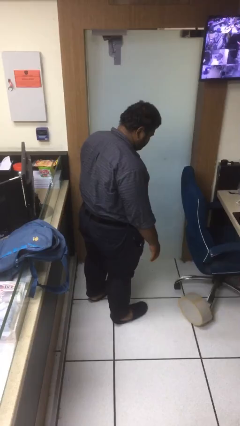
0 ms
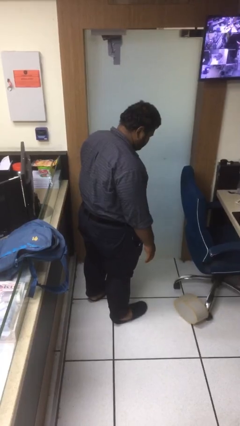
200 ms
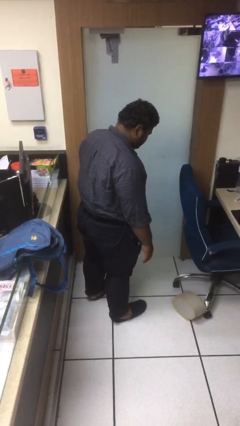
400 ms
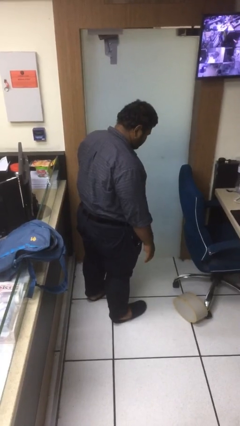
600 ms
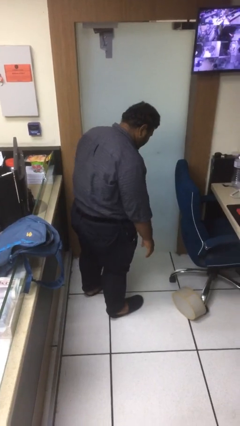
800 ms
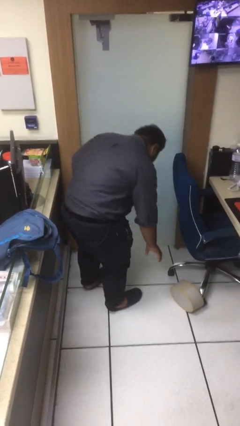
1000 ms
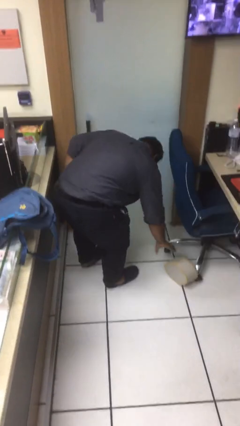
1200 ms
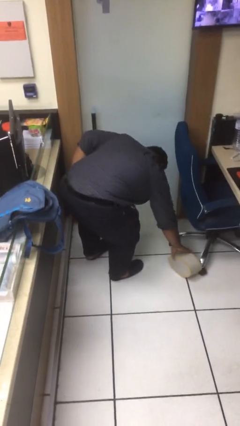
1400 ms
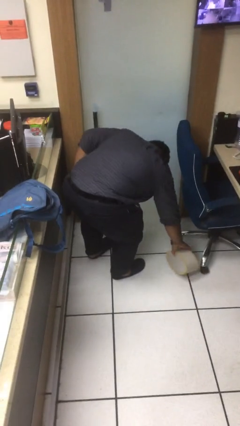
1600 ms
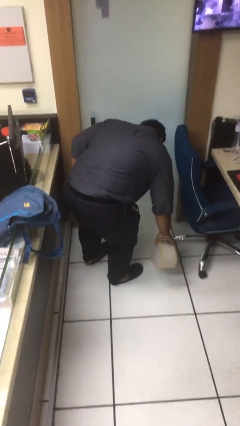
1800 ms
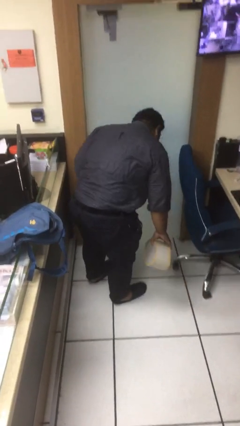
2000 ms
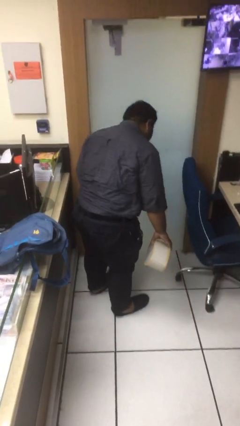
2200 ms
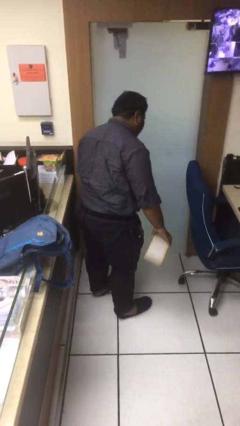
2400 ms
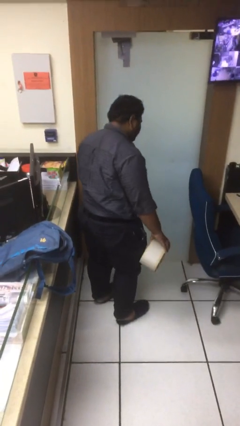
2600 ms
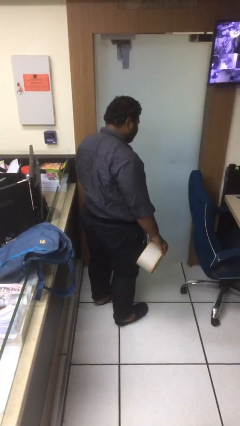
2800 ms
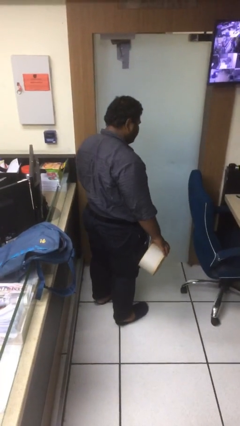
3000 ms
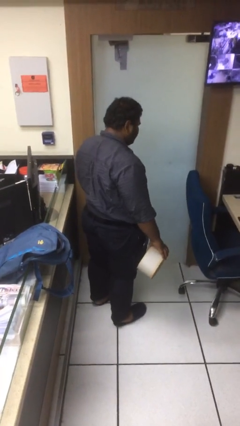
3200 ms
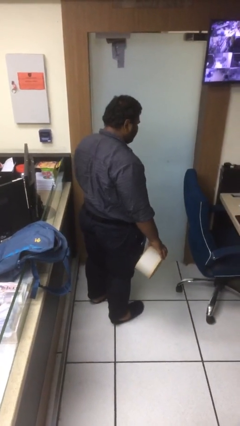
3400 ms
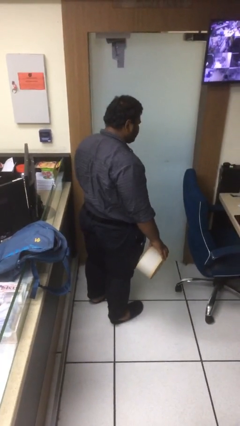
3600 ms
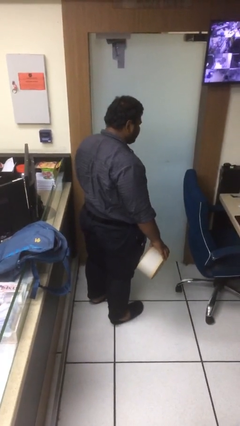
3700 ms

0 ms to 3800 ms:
person picks up object from floor

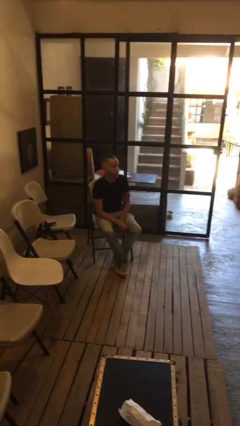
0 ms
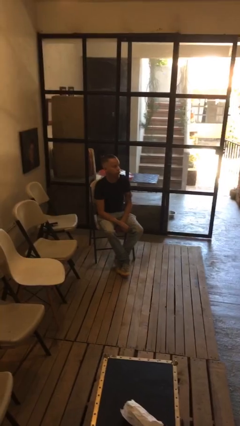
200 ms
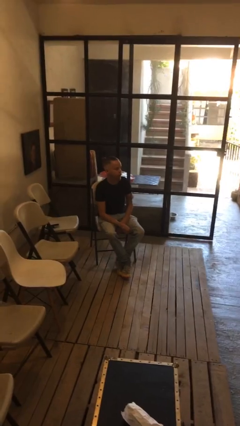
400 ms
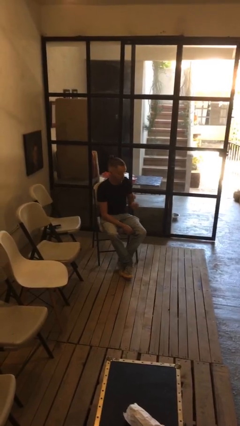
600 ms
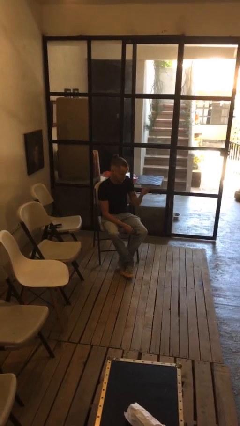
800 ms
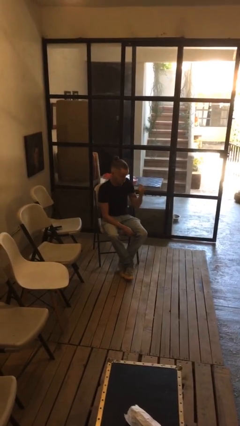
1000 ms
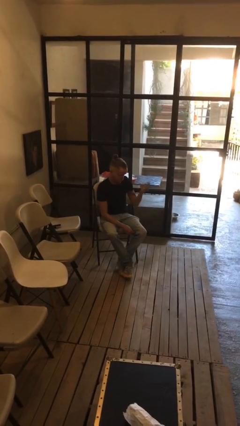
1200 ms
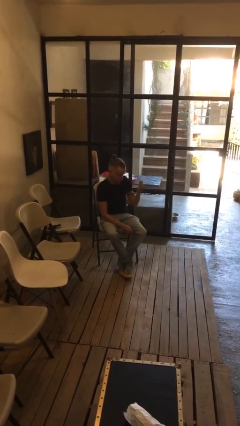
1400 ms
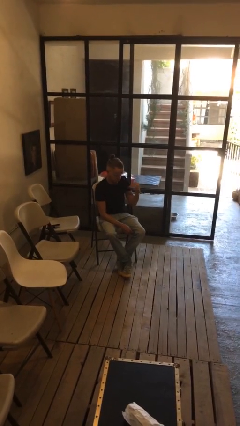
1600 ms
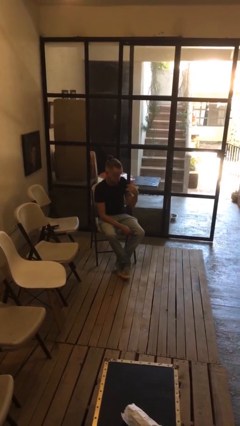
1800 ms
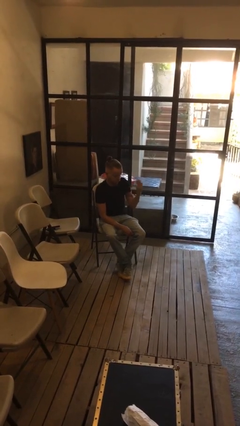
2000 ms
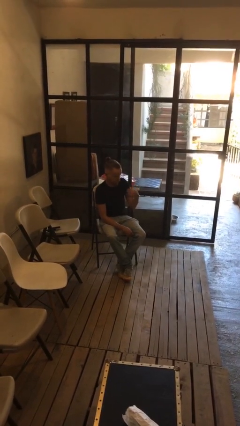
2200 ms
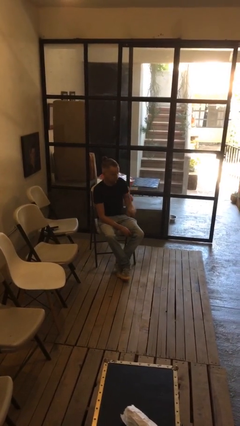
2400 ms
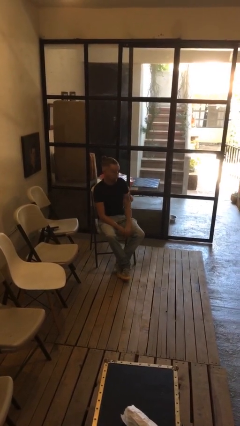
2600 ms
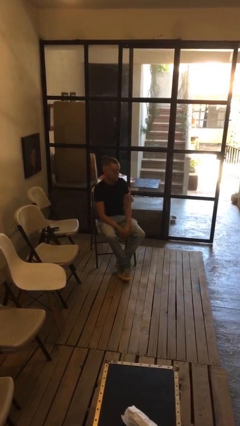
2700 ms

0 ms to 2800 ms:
person gestures come here

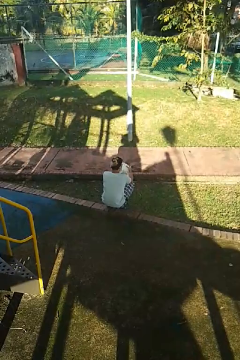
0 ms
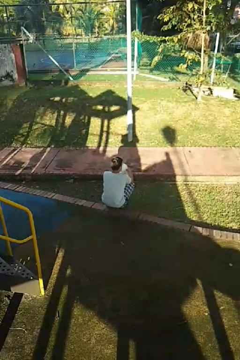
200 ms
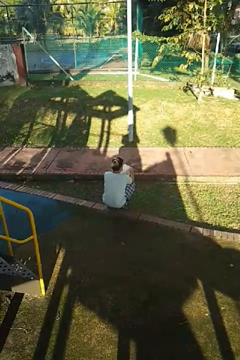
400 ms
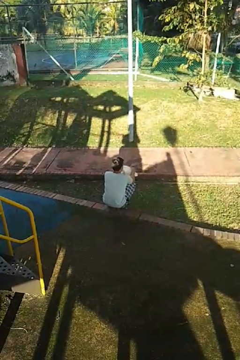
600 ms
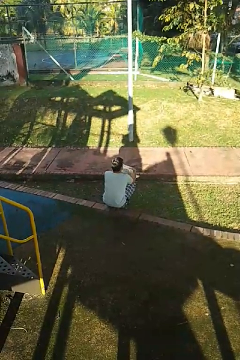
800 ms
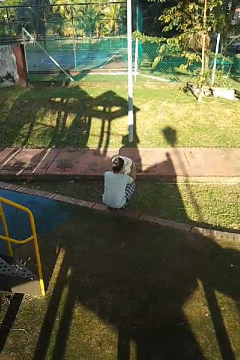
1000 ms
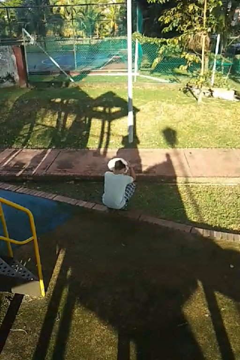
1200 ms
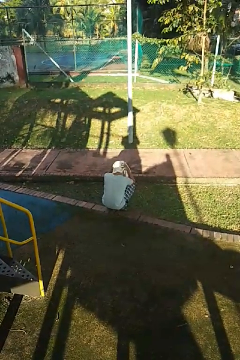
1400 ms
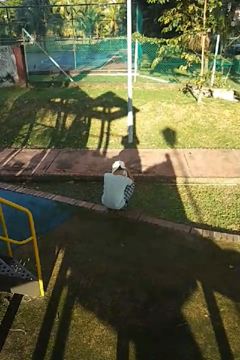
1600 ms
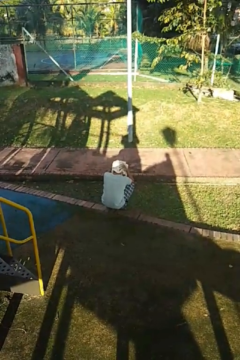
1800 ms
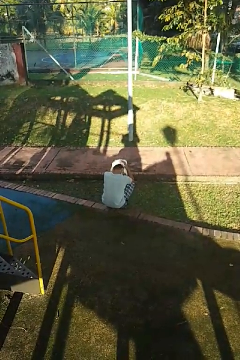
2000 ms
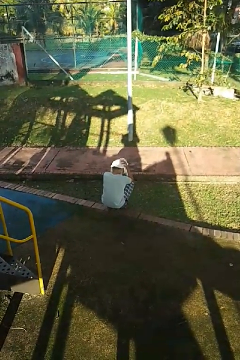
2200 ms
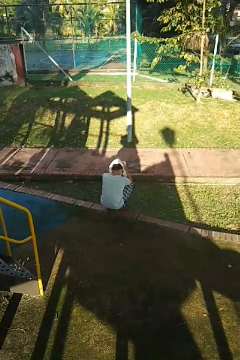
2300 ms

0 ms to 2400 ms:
person dries hair with towel

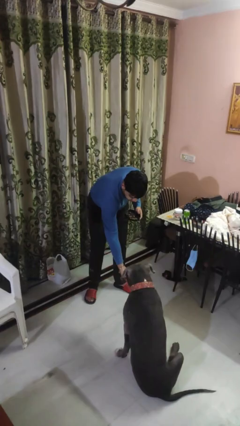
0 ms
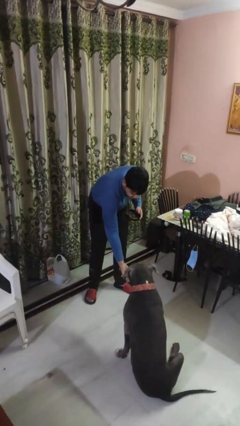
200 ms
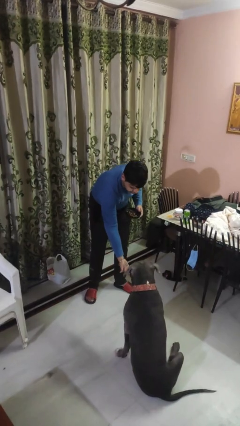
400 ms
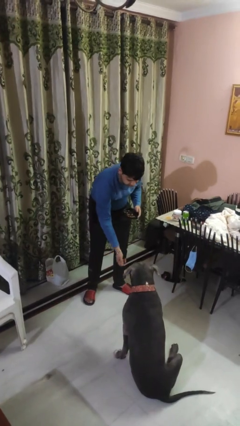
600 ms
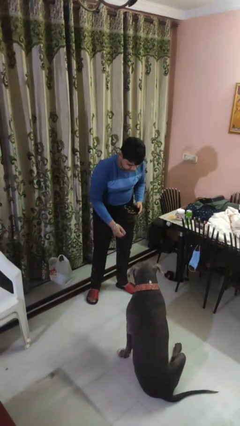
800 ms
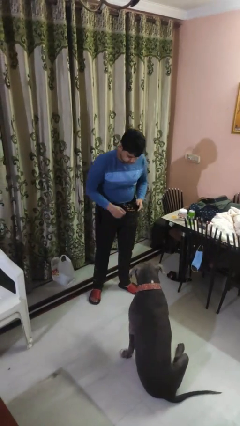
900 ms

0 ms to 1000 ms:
person feeds dog

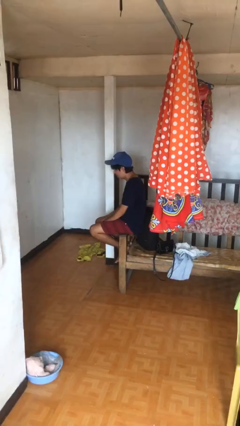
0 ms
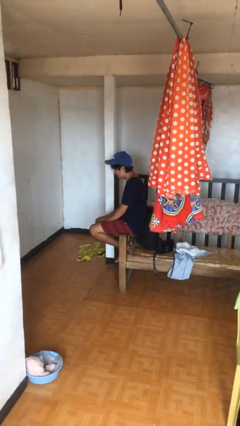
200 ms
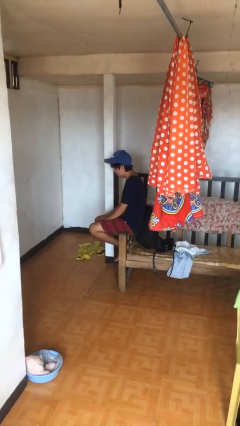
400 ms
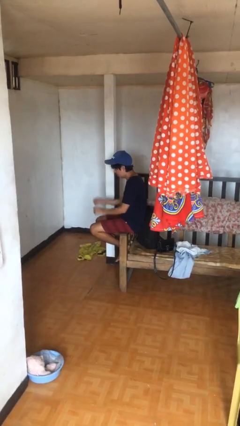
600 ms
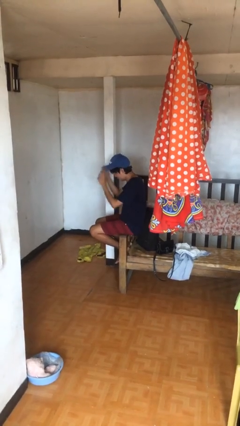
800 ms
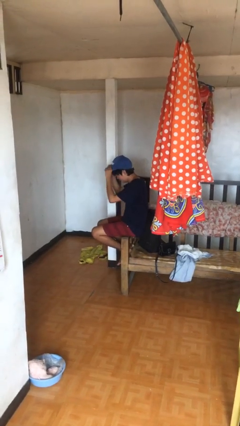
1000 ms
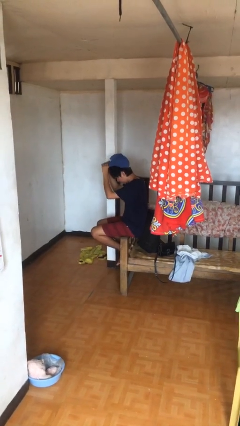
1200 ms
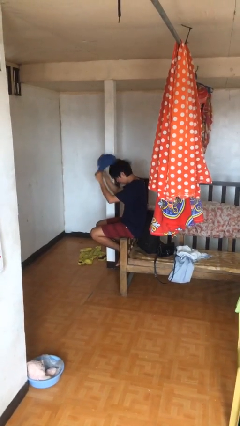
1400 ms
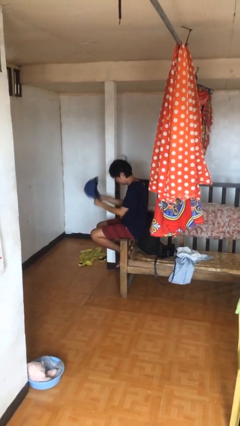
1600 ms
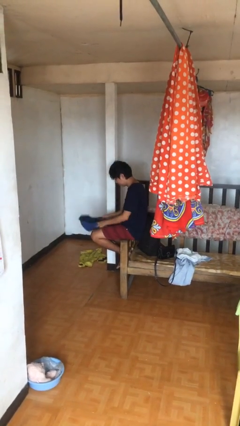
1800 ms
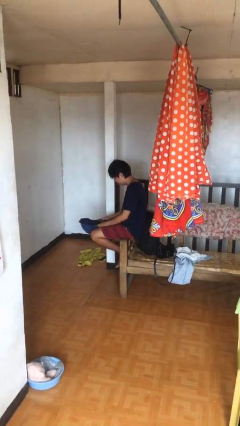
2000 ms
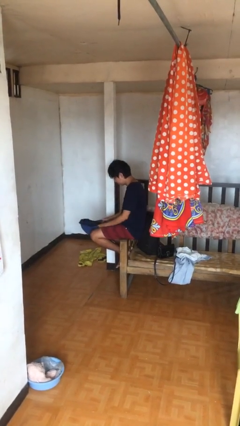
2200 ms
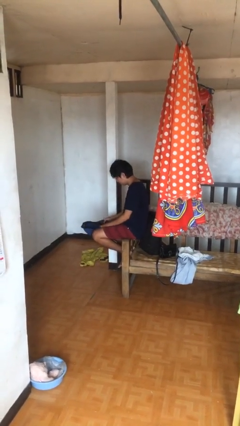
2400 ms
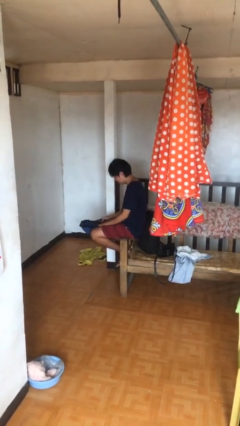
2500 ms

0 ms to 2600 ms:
person takes off hat

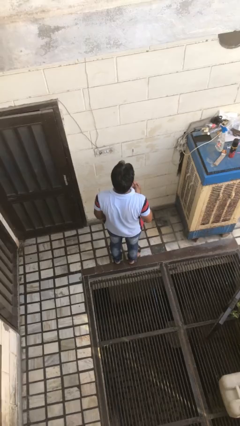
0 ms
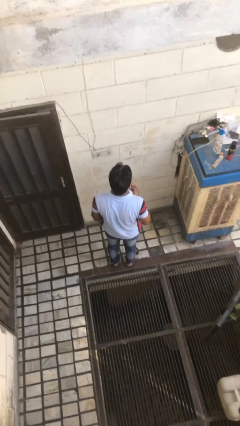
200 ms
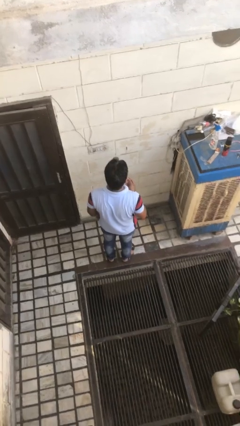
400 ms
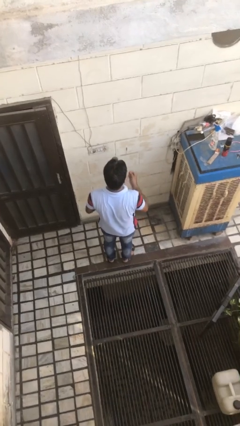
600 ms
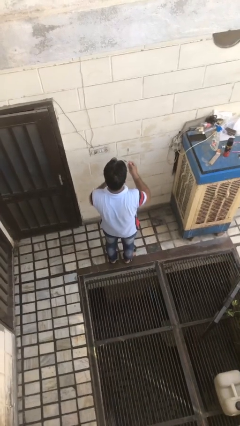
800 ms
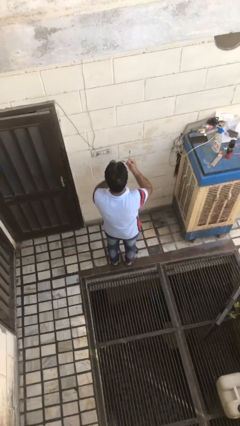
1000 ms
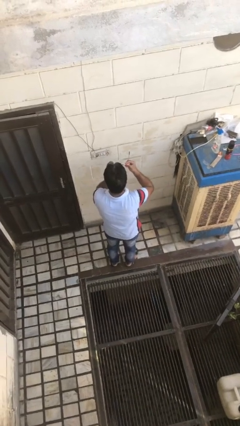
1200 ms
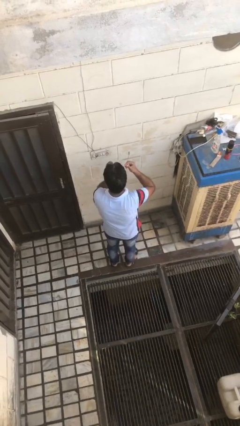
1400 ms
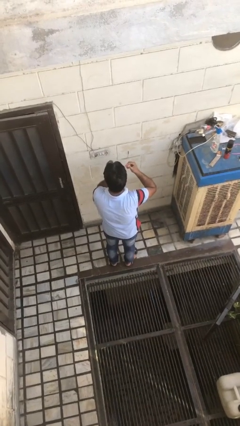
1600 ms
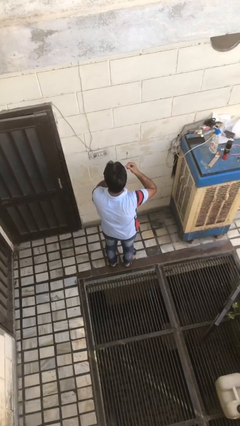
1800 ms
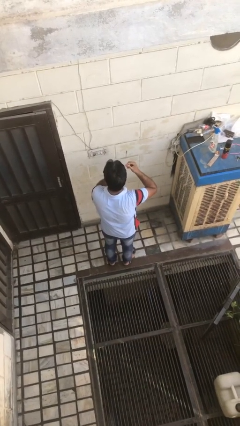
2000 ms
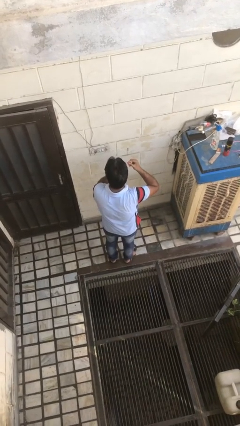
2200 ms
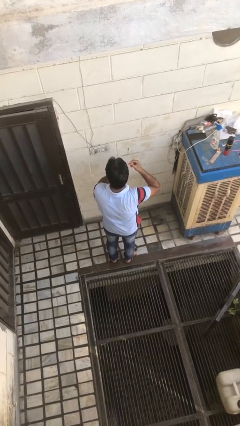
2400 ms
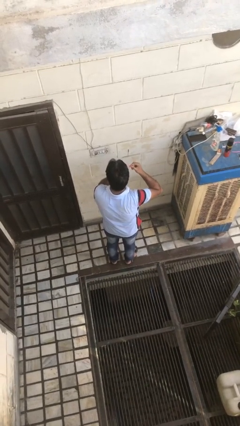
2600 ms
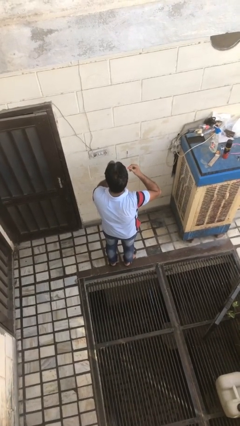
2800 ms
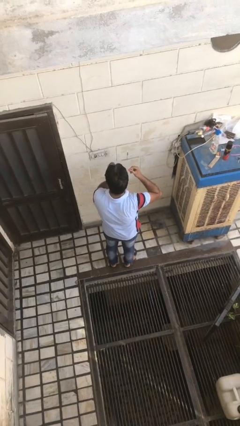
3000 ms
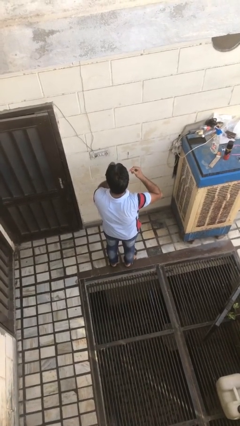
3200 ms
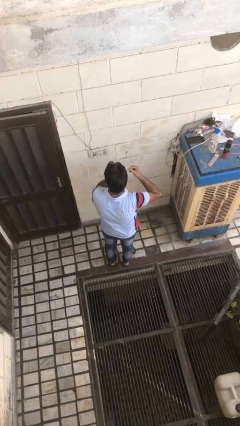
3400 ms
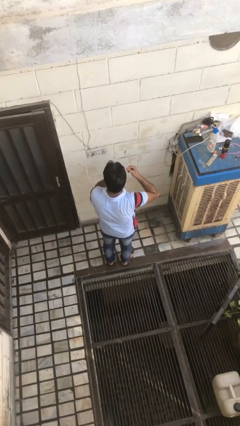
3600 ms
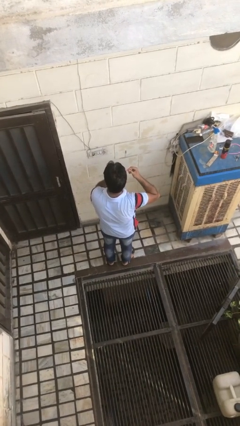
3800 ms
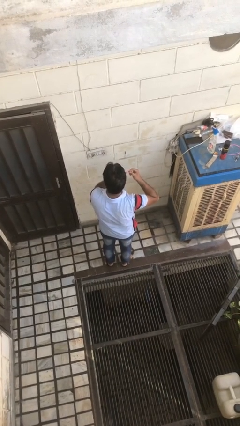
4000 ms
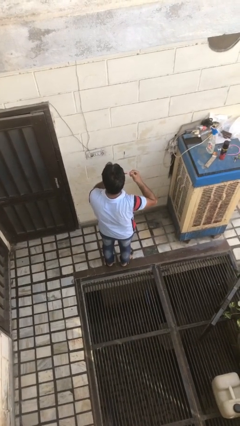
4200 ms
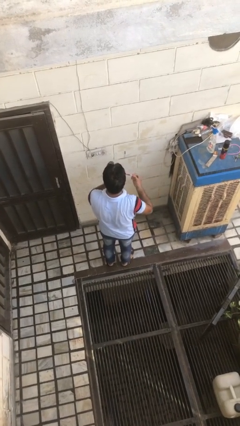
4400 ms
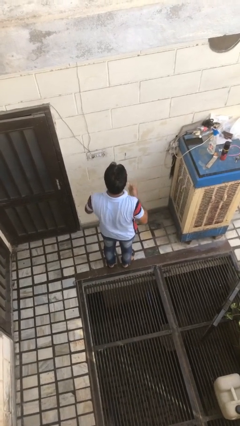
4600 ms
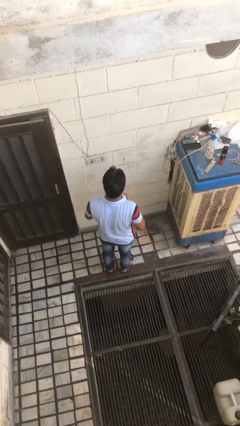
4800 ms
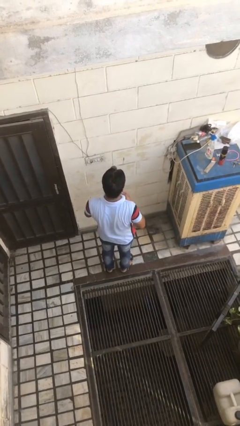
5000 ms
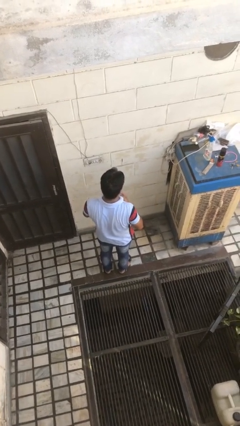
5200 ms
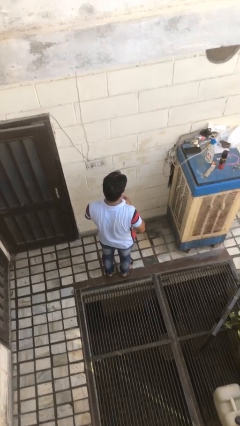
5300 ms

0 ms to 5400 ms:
person applies eye makeup
